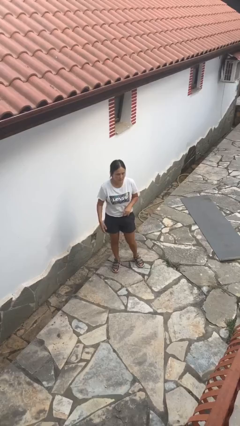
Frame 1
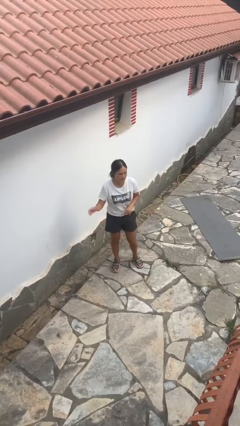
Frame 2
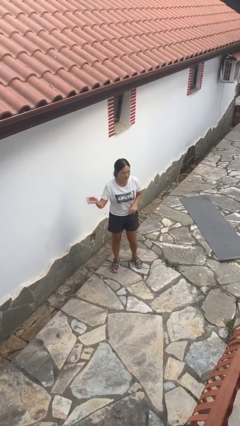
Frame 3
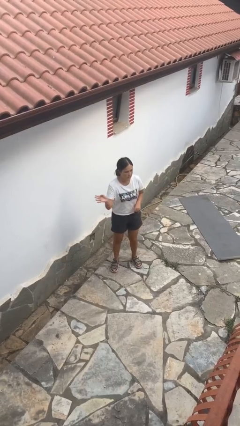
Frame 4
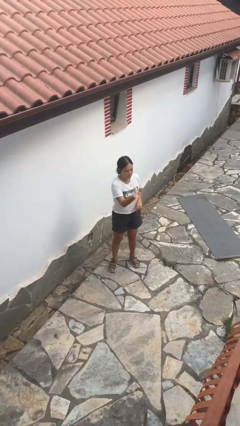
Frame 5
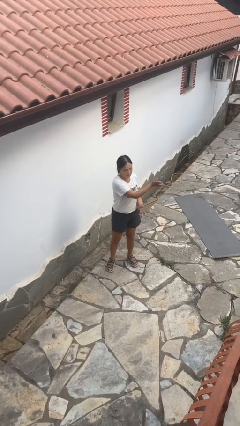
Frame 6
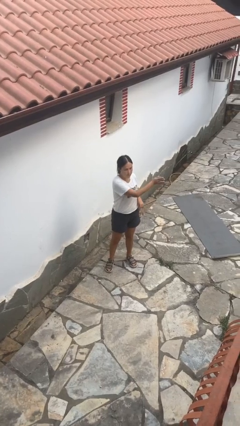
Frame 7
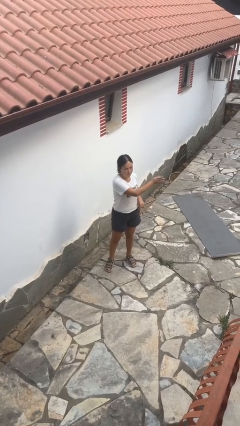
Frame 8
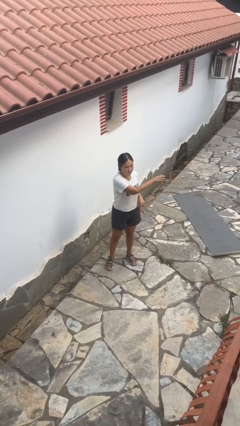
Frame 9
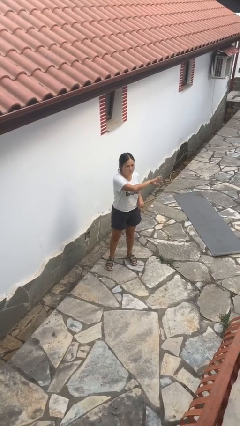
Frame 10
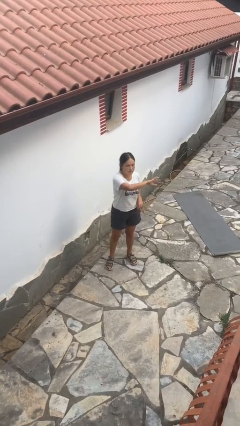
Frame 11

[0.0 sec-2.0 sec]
person gestures swipe left

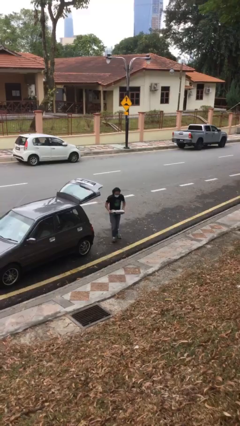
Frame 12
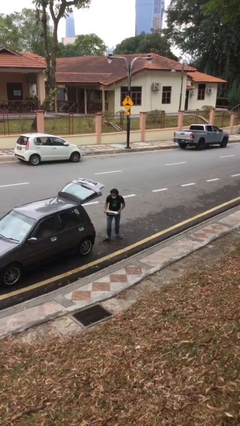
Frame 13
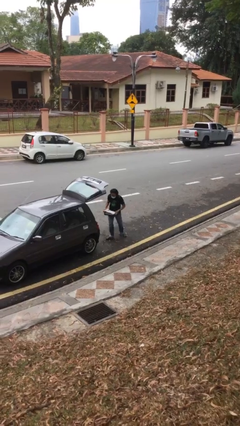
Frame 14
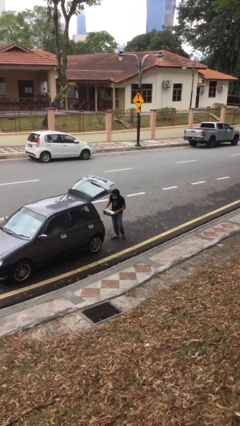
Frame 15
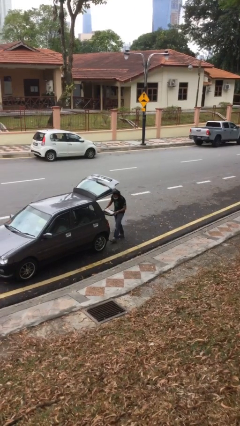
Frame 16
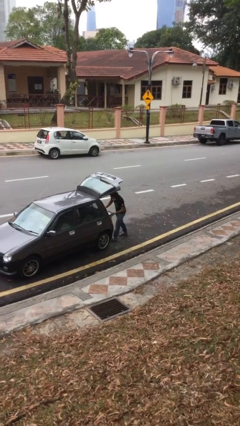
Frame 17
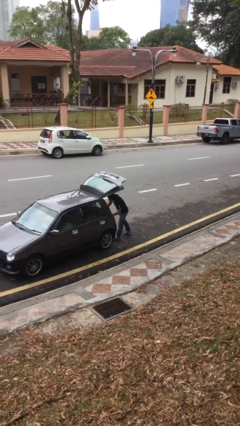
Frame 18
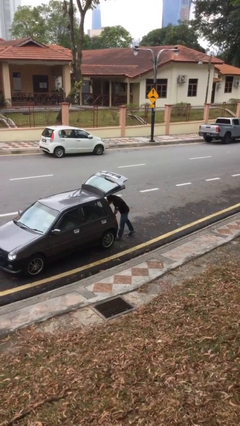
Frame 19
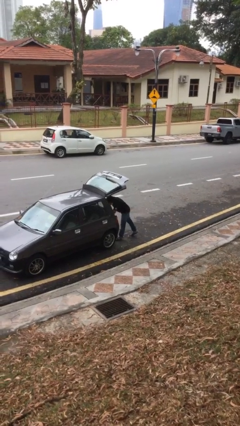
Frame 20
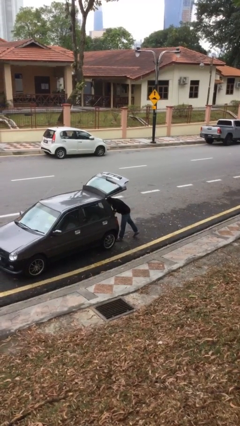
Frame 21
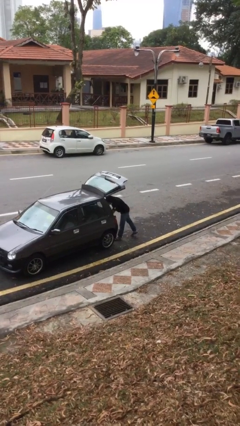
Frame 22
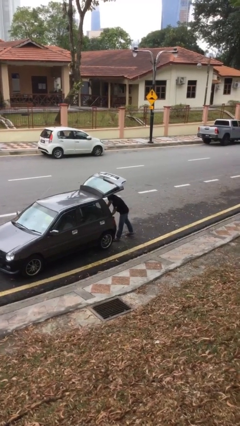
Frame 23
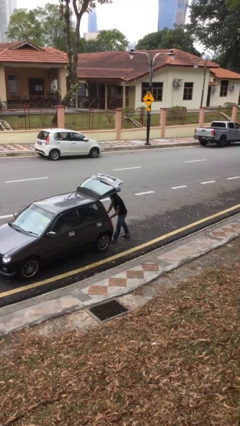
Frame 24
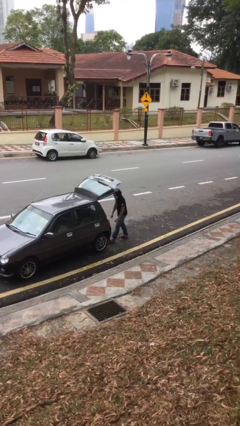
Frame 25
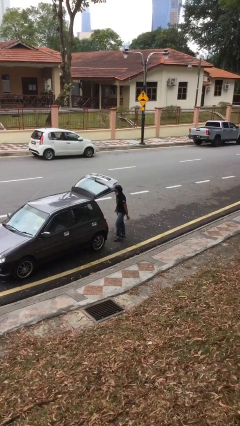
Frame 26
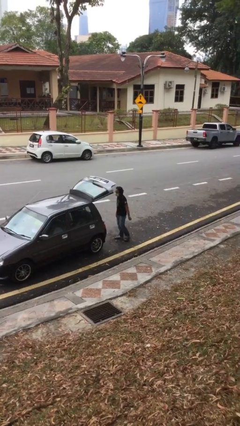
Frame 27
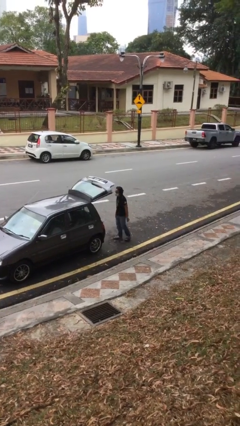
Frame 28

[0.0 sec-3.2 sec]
person loads car

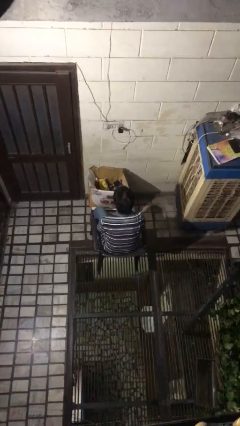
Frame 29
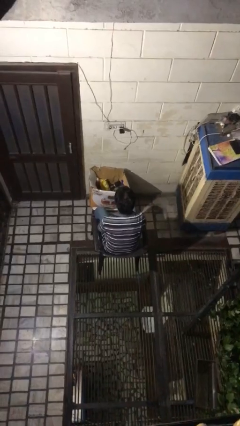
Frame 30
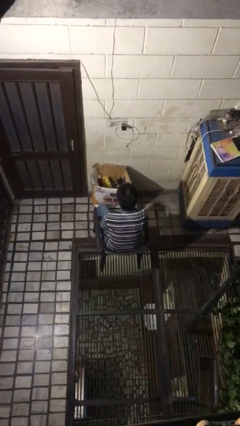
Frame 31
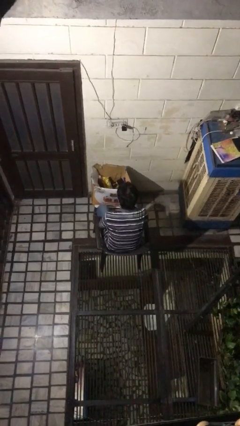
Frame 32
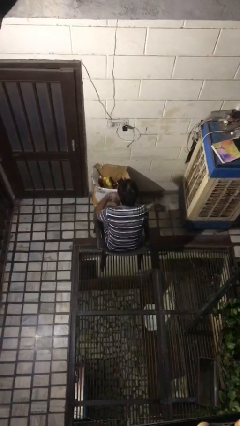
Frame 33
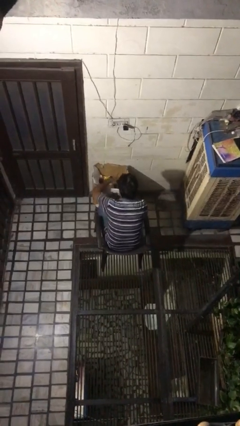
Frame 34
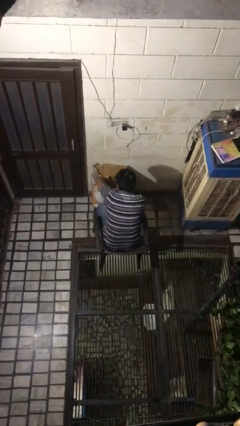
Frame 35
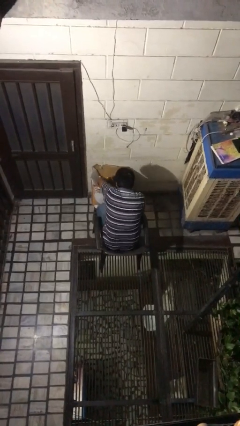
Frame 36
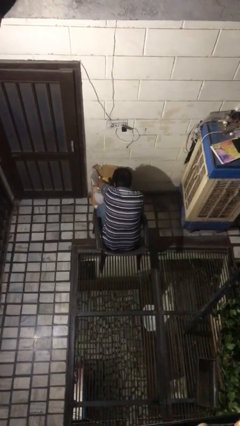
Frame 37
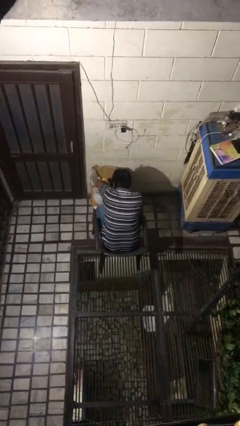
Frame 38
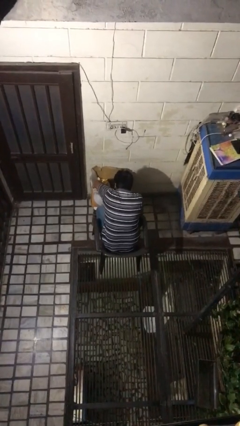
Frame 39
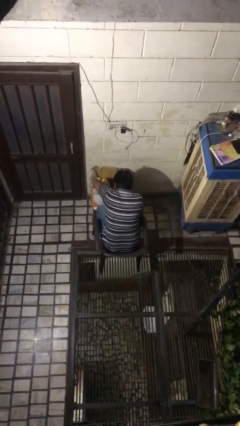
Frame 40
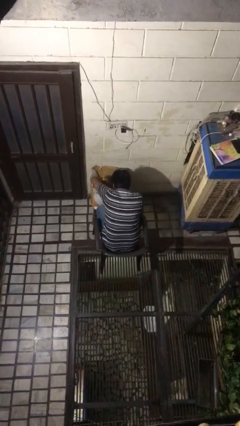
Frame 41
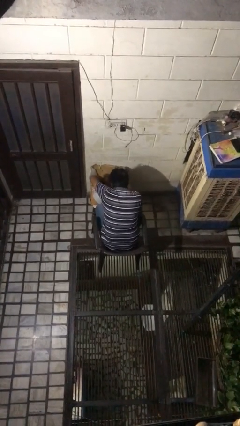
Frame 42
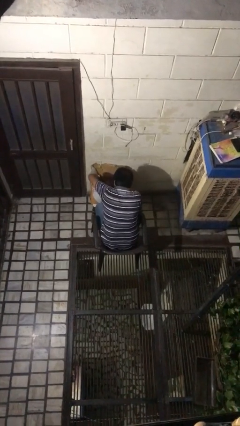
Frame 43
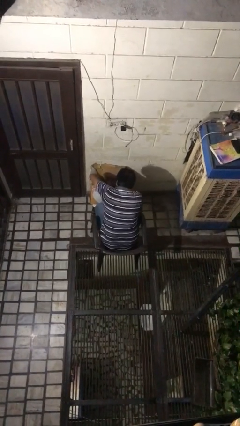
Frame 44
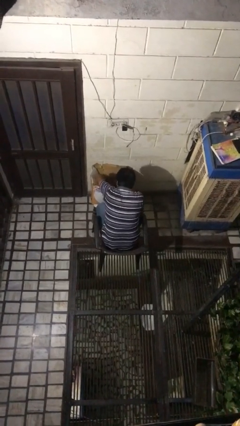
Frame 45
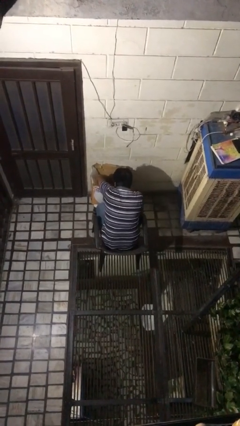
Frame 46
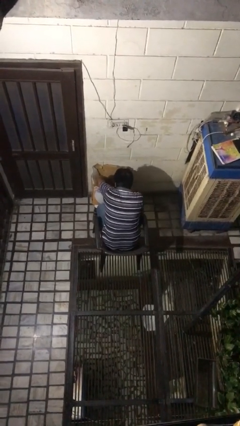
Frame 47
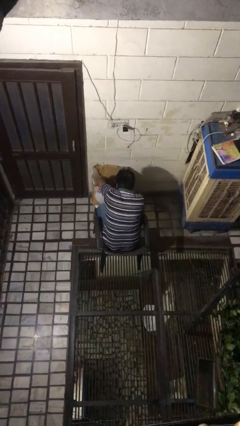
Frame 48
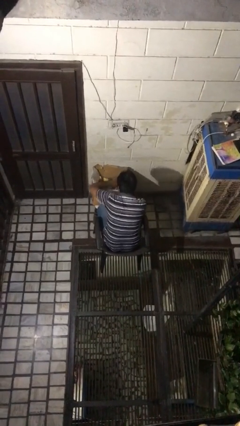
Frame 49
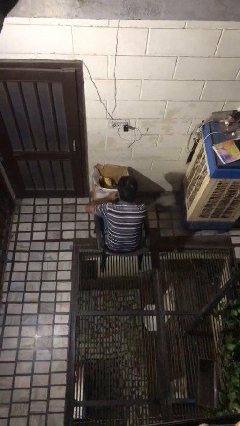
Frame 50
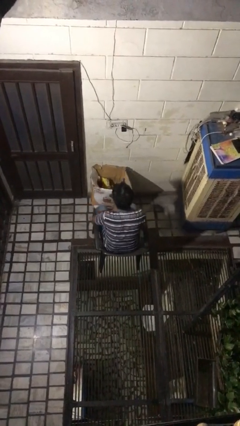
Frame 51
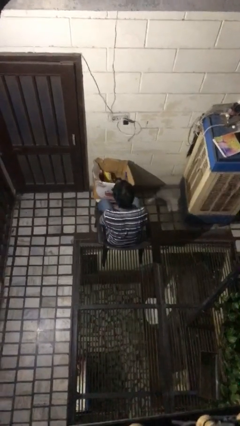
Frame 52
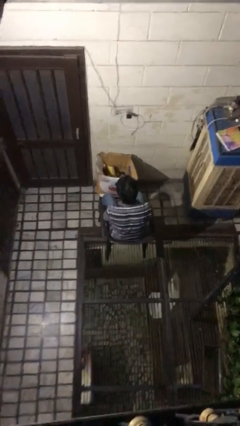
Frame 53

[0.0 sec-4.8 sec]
person searches in box

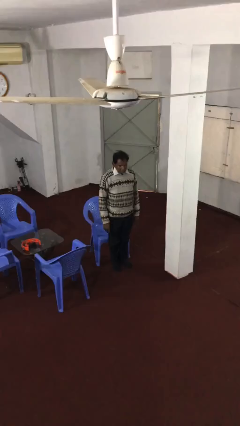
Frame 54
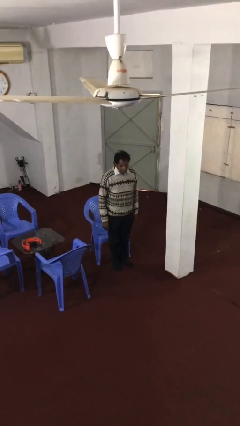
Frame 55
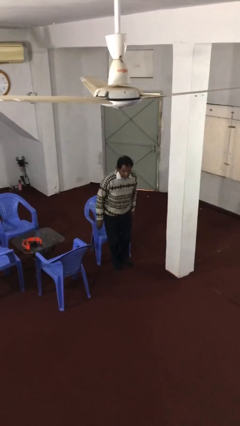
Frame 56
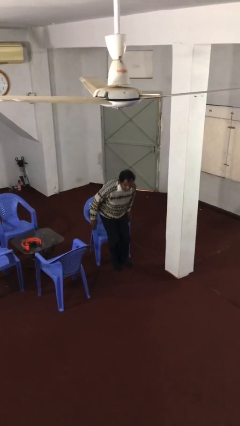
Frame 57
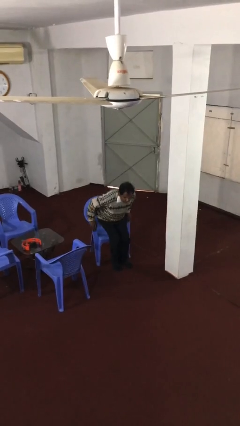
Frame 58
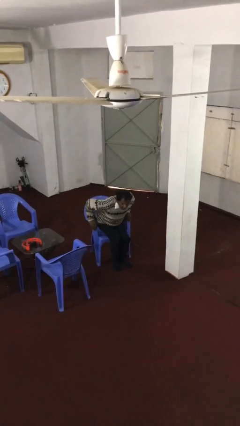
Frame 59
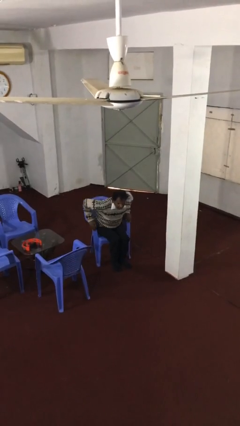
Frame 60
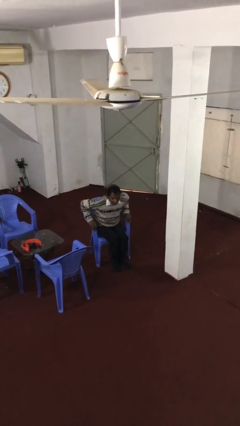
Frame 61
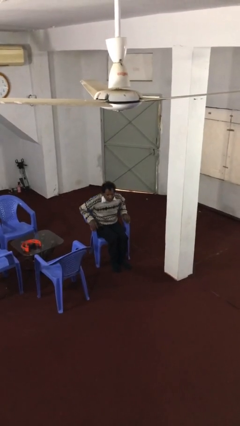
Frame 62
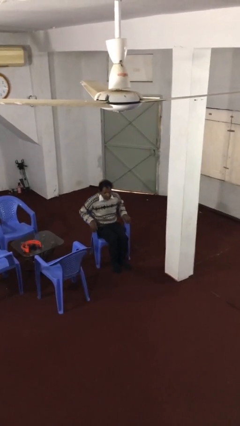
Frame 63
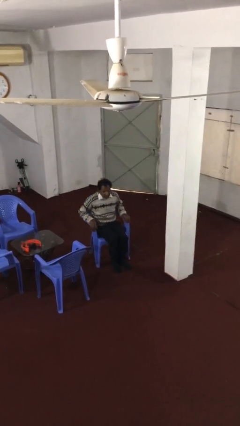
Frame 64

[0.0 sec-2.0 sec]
person sits down

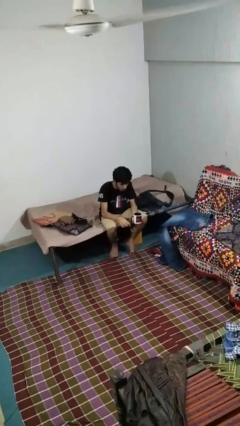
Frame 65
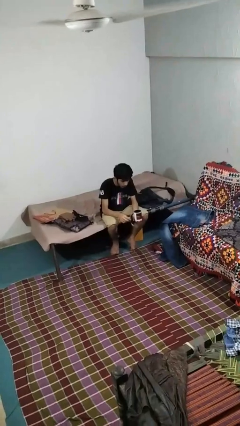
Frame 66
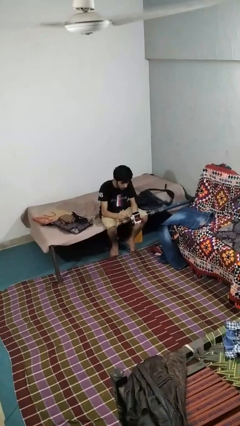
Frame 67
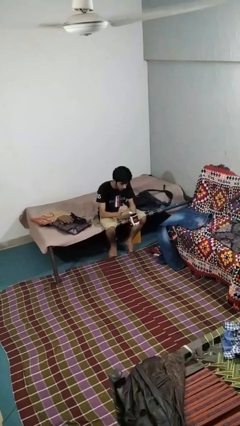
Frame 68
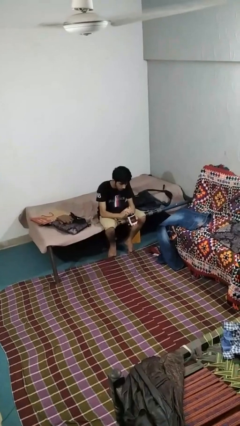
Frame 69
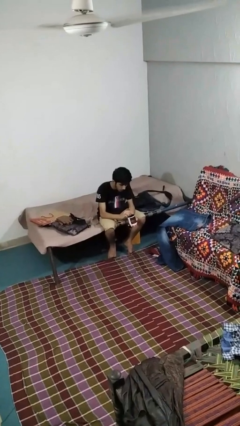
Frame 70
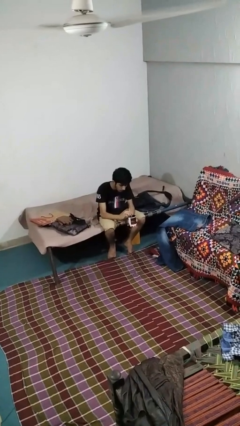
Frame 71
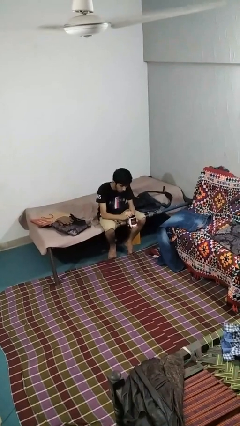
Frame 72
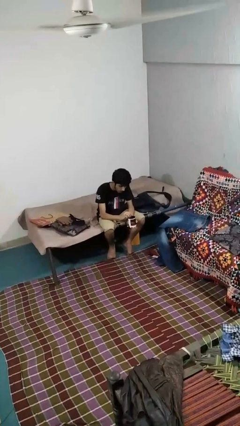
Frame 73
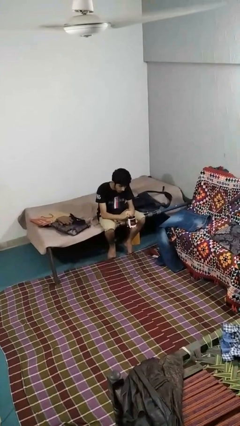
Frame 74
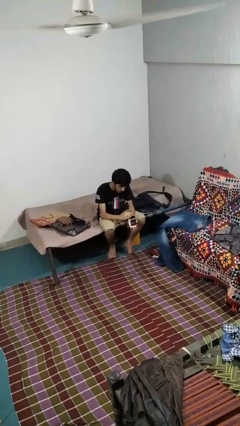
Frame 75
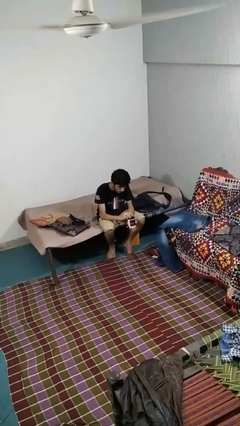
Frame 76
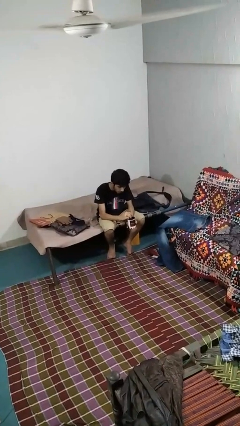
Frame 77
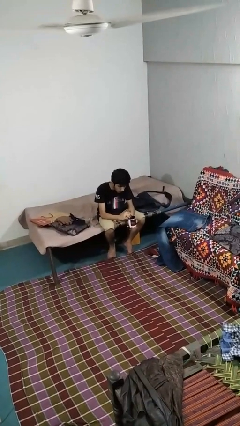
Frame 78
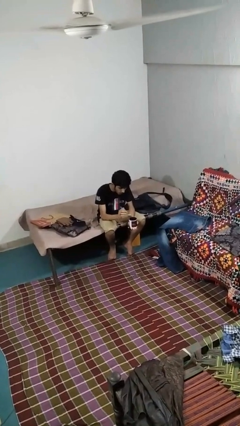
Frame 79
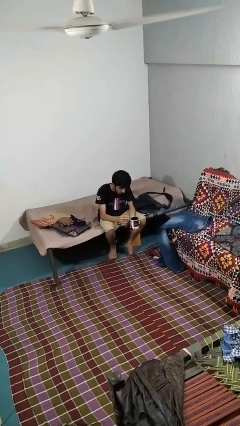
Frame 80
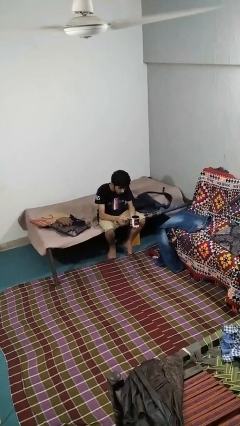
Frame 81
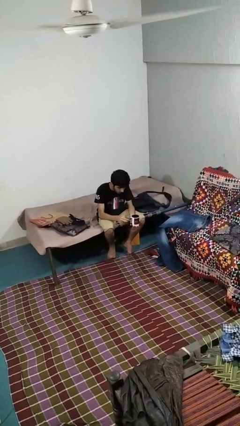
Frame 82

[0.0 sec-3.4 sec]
person stirs mug

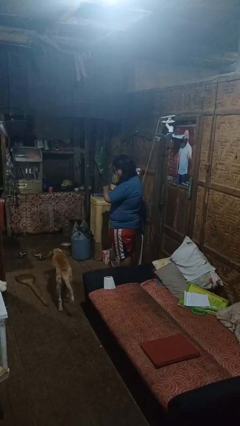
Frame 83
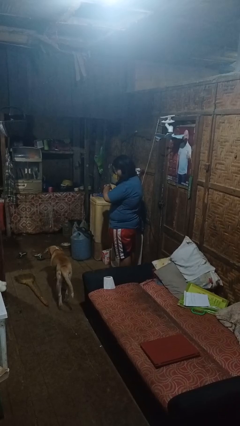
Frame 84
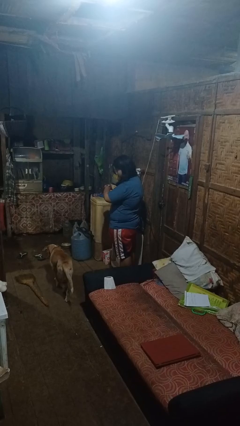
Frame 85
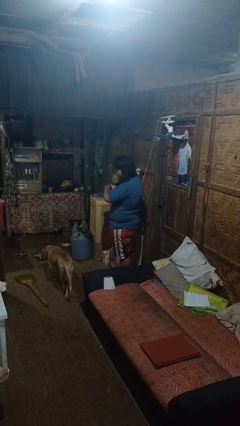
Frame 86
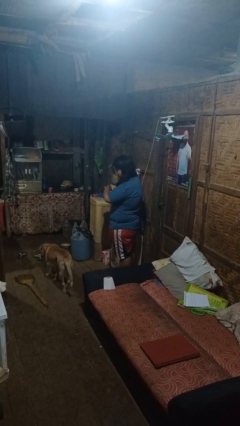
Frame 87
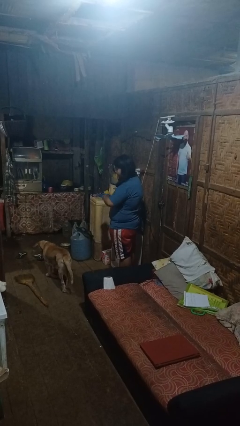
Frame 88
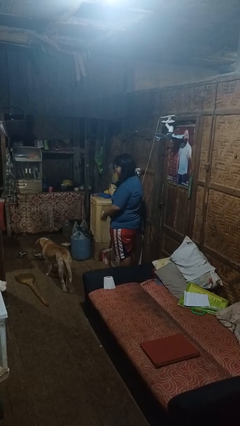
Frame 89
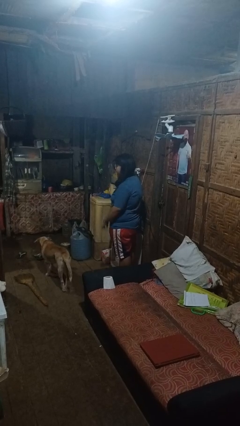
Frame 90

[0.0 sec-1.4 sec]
person looks at wristwatch

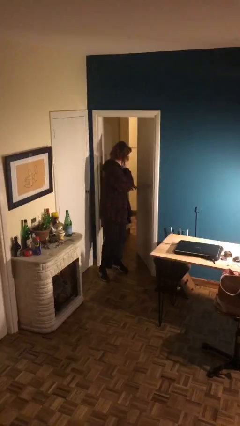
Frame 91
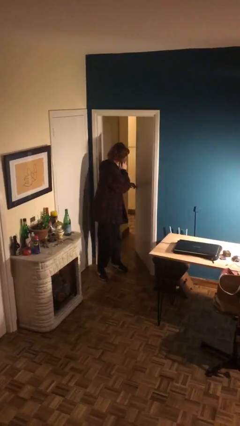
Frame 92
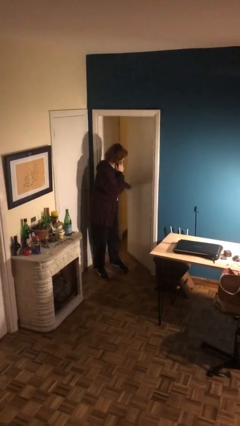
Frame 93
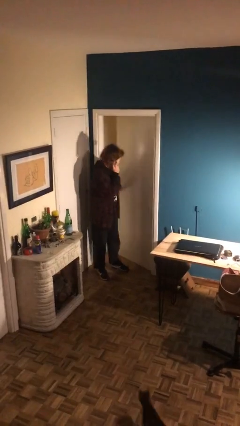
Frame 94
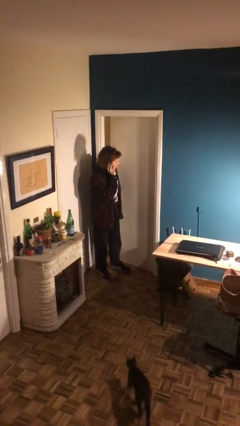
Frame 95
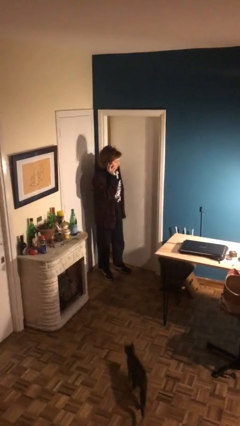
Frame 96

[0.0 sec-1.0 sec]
person closes facility door
